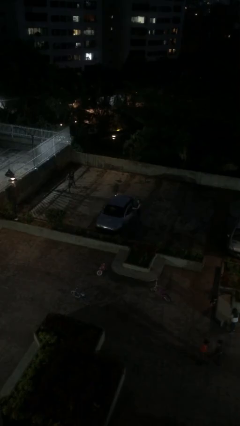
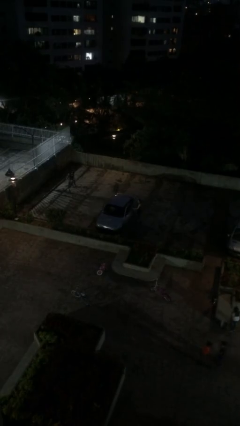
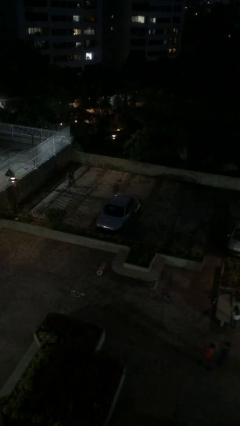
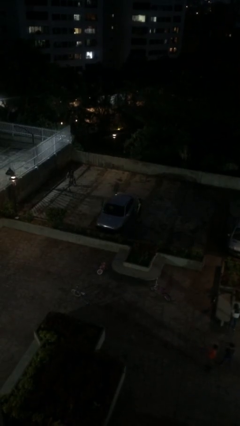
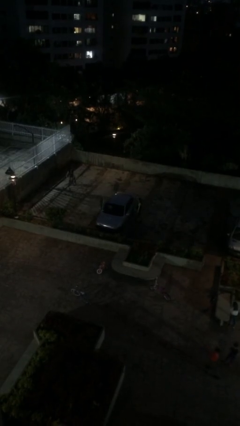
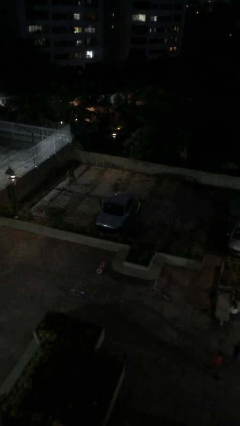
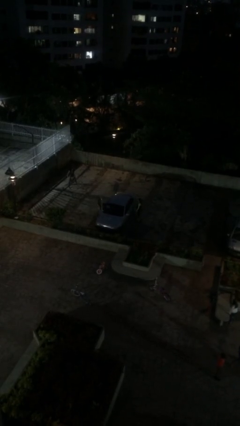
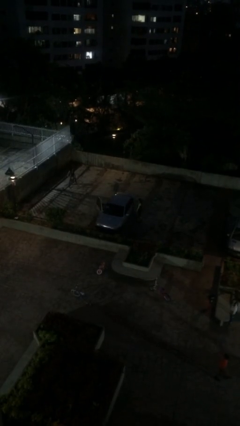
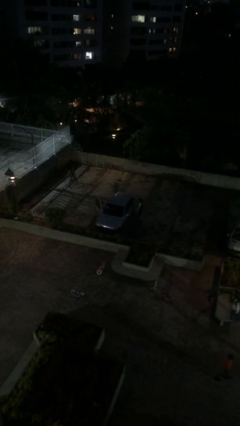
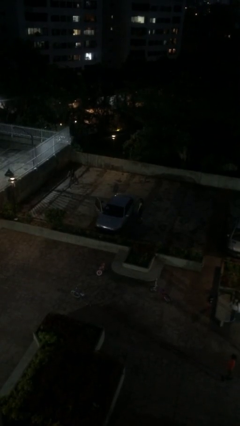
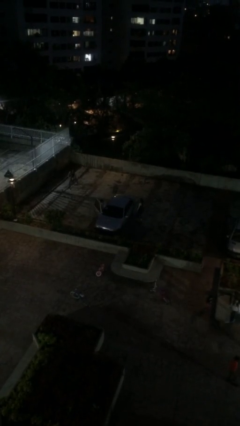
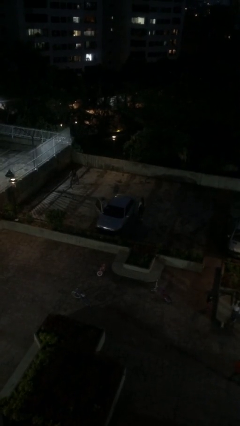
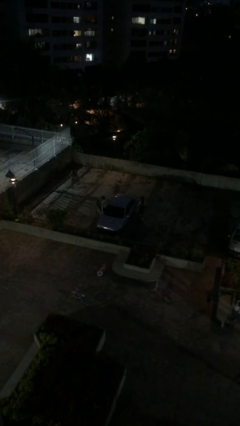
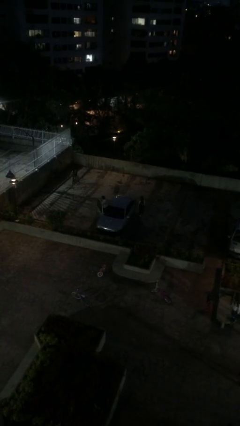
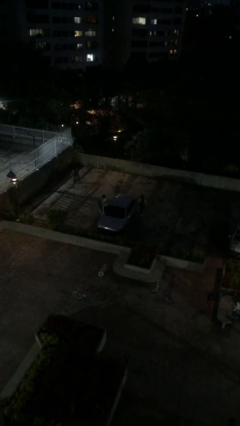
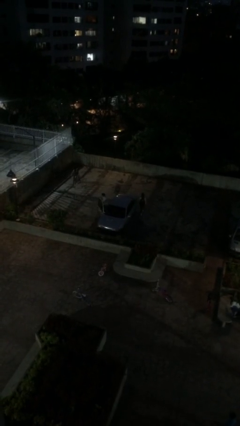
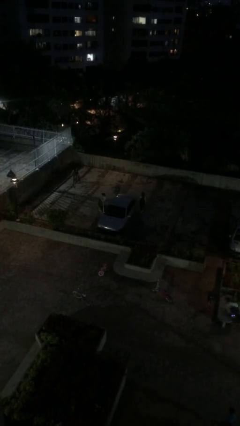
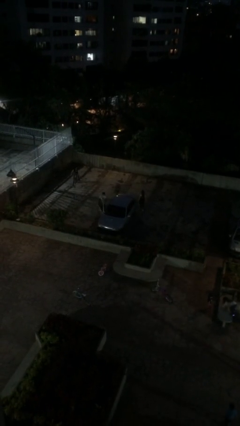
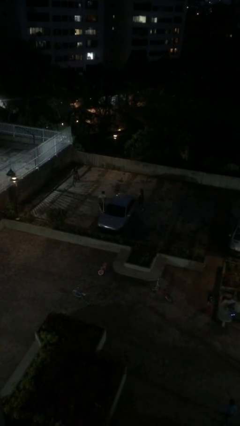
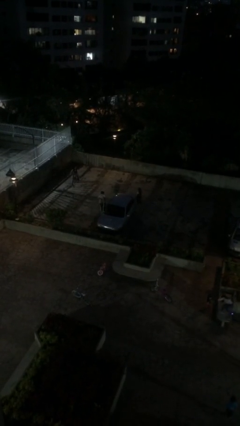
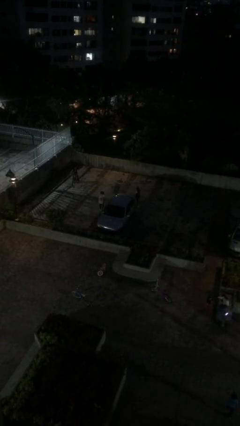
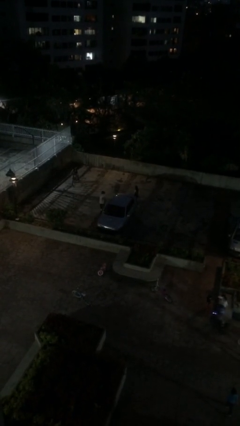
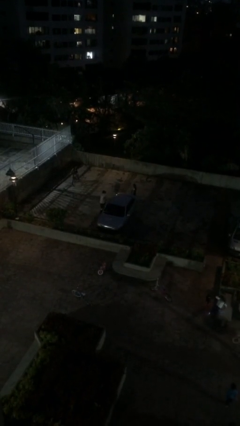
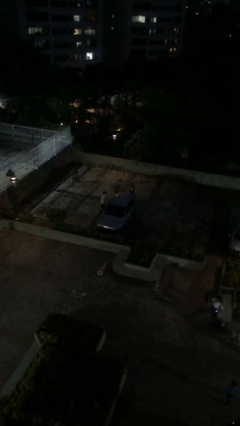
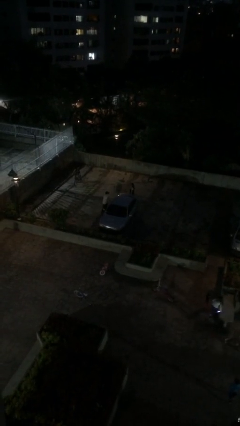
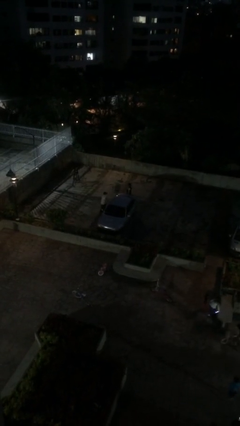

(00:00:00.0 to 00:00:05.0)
car drops off person

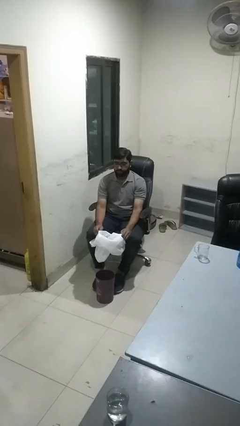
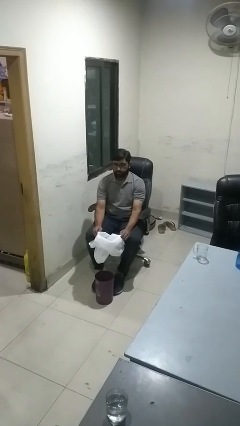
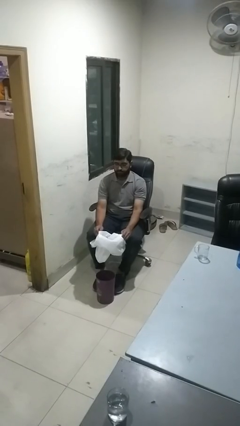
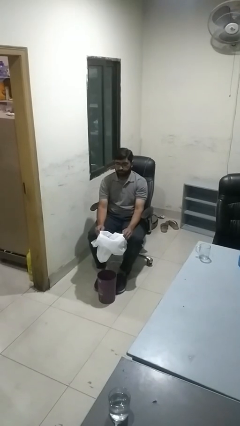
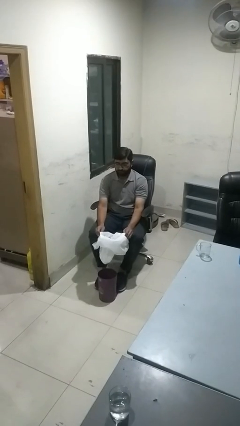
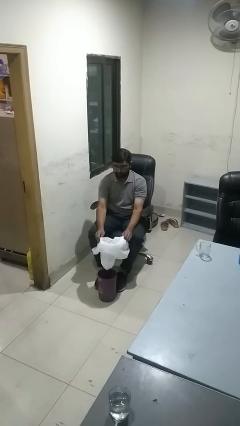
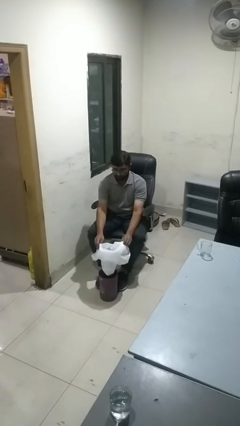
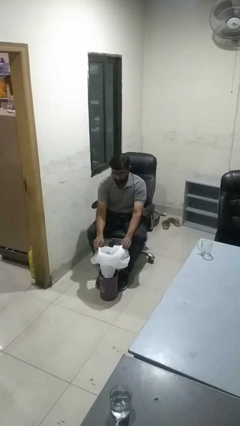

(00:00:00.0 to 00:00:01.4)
person inserts trashbag into trashcan

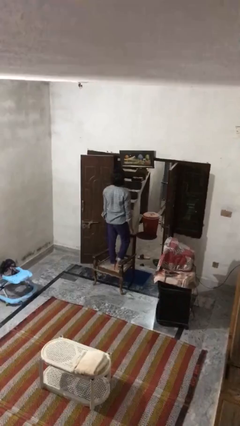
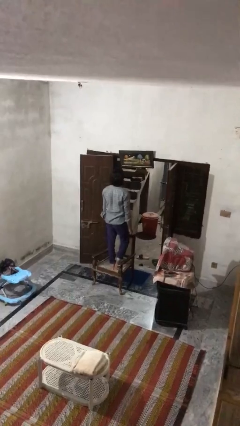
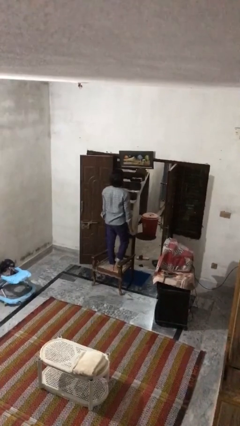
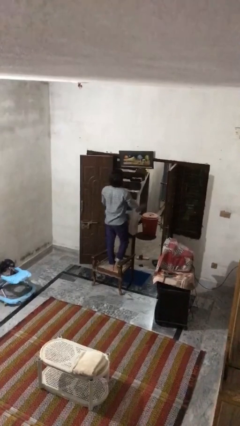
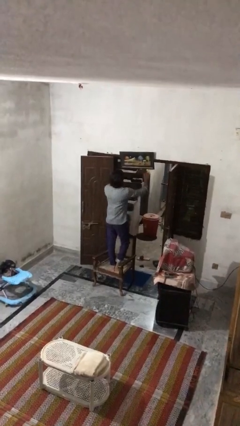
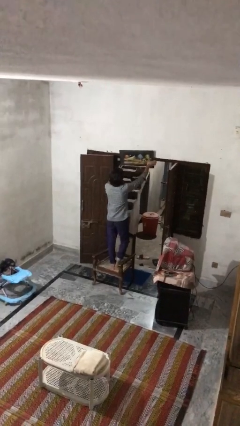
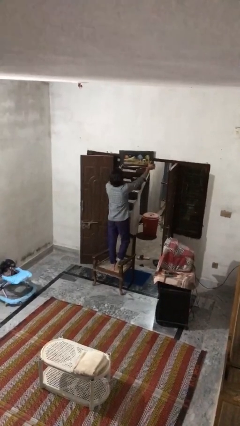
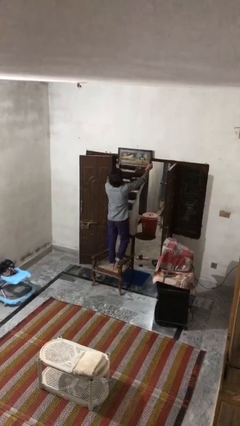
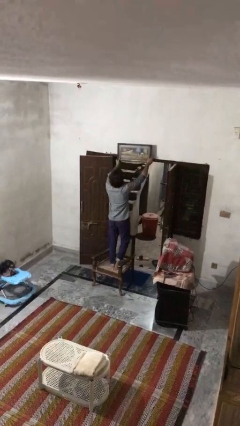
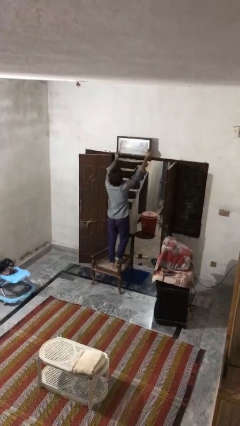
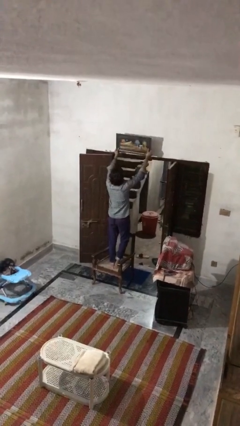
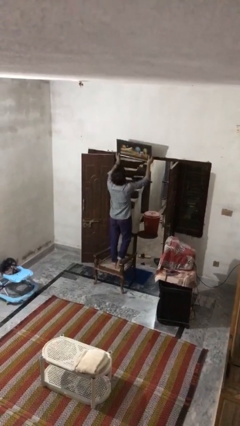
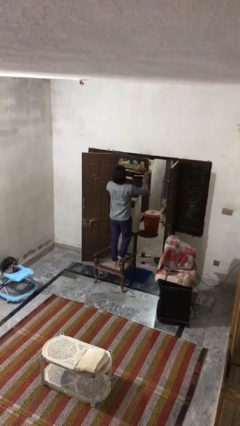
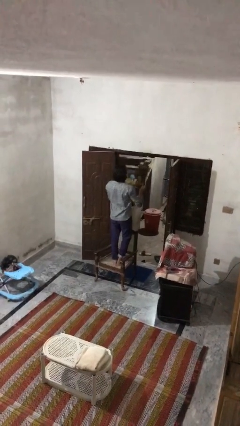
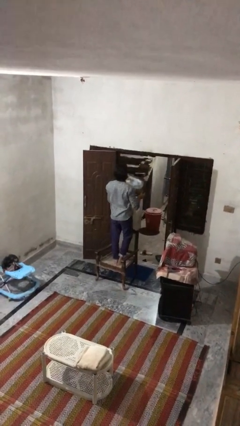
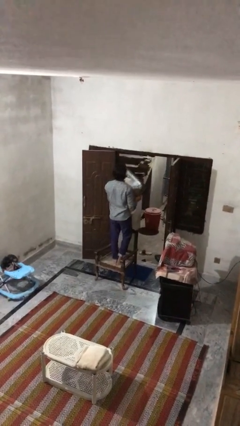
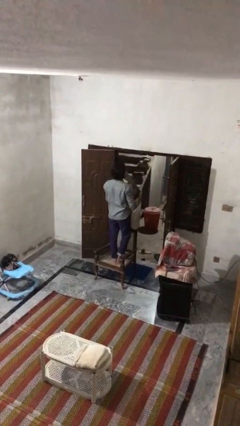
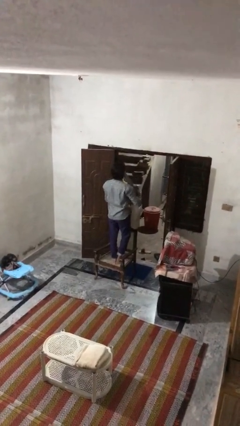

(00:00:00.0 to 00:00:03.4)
person takes down picture frame

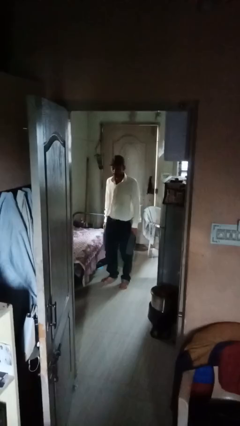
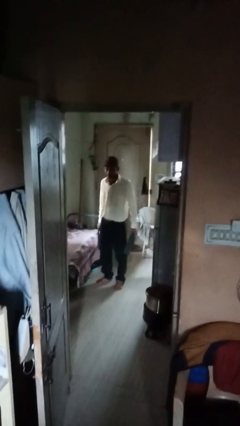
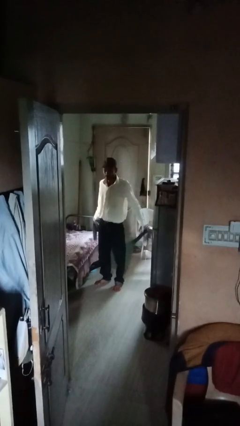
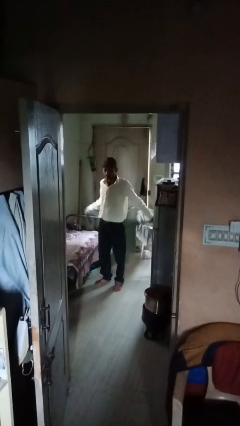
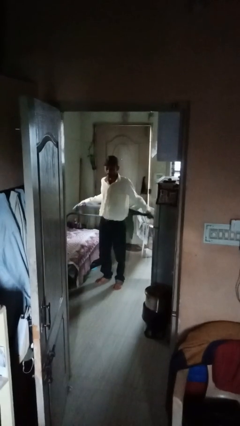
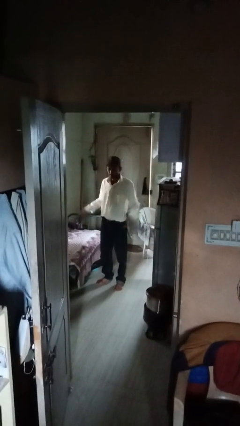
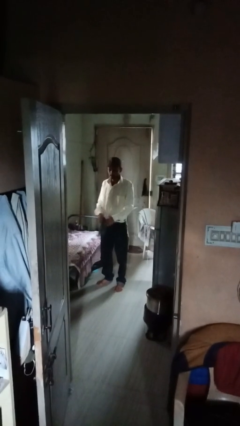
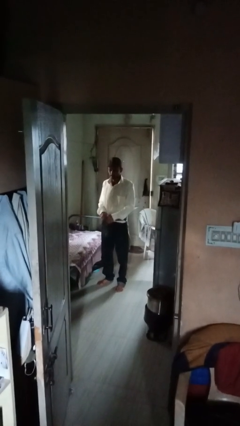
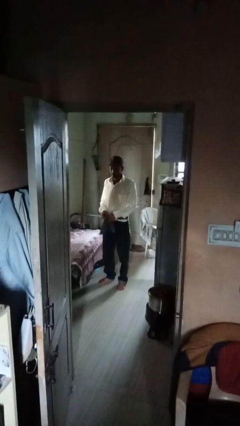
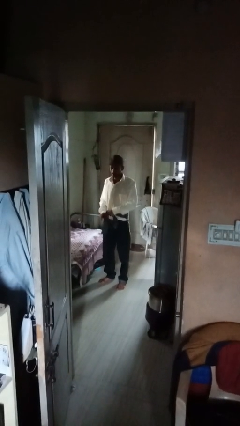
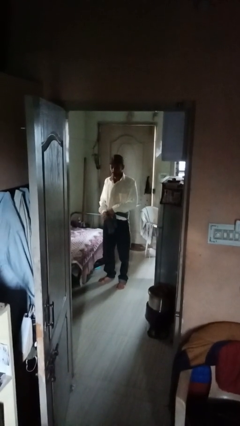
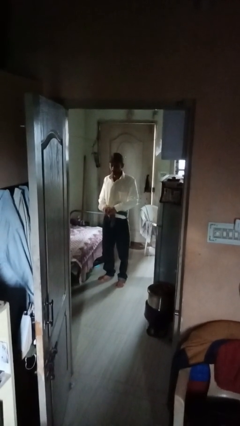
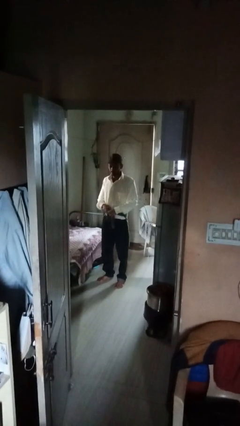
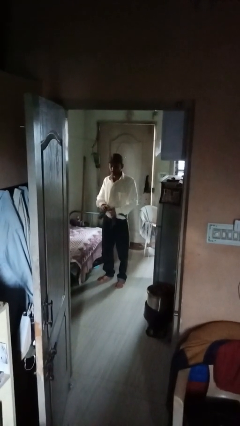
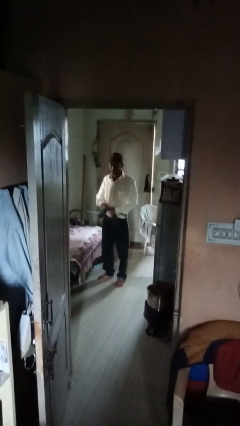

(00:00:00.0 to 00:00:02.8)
person ties jacket around waist

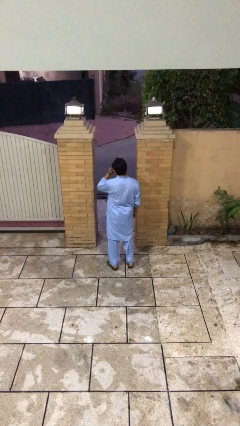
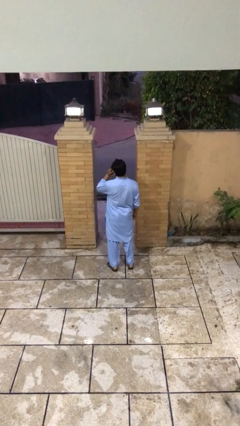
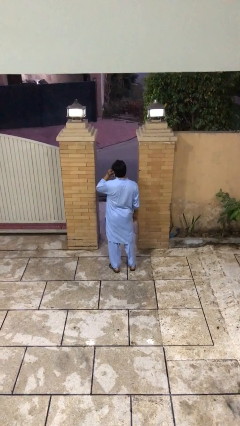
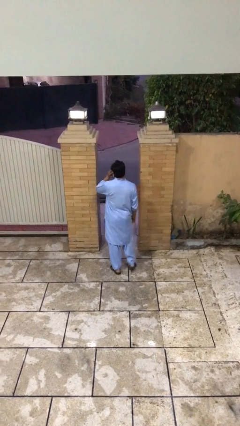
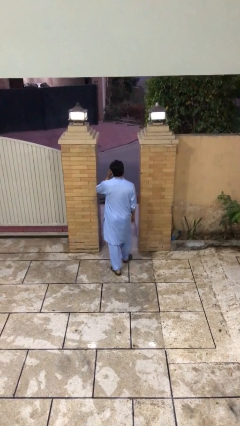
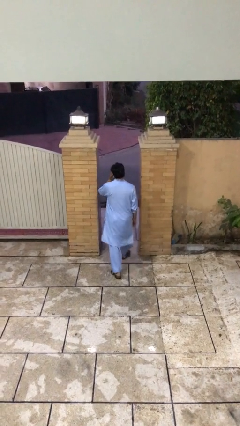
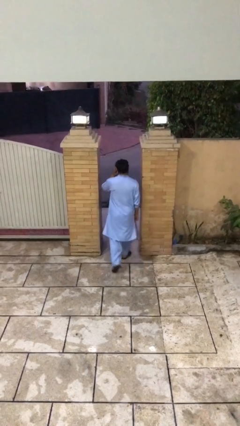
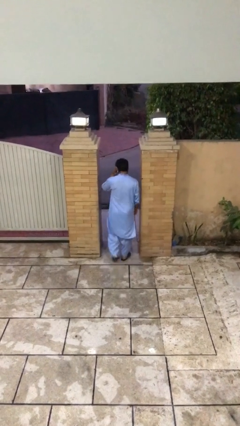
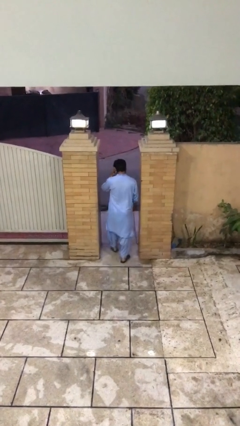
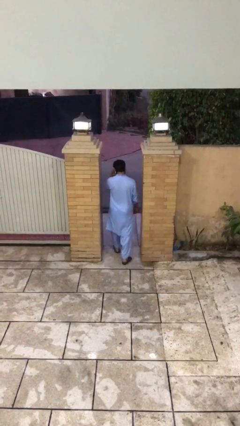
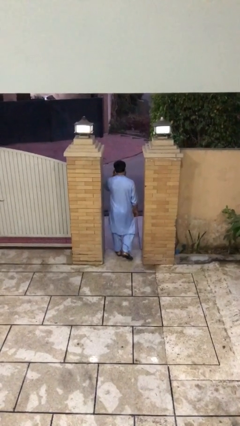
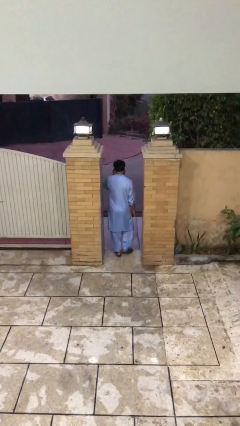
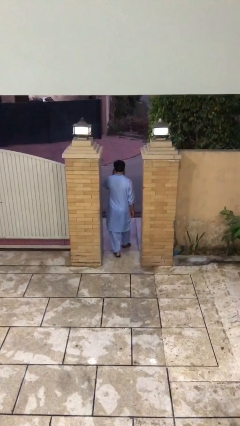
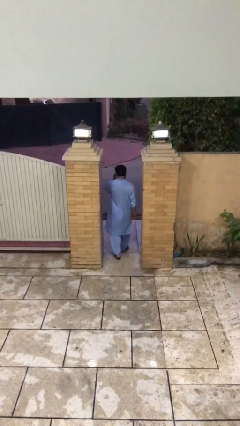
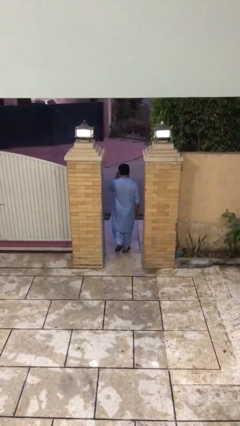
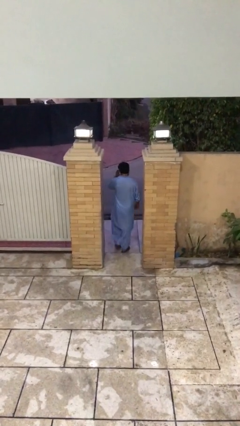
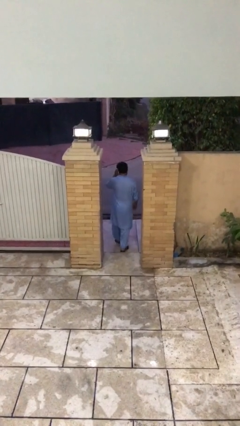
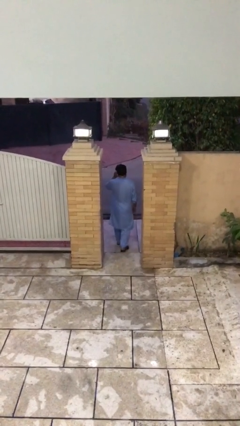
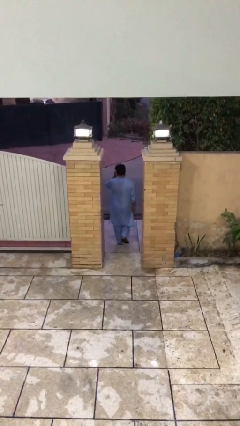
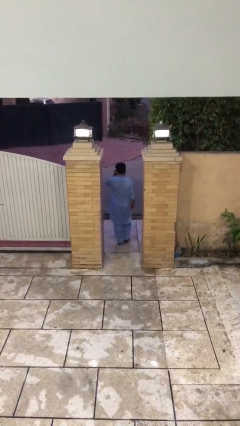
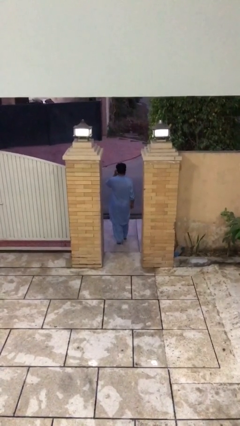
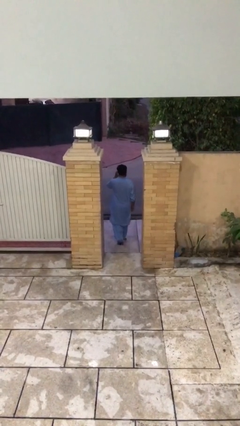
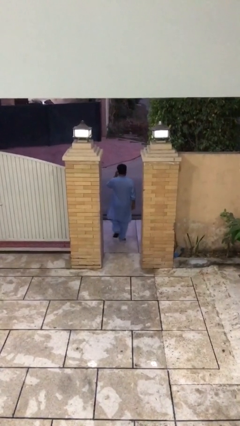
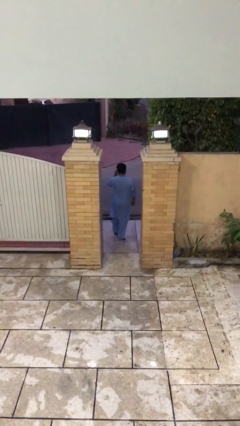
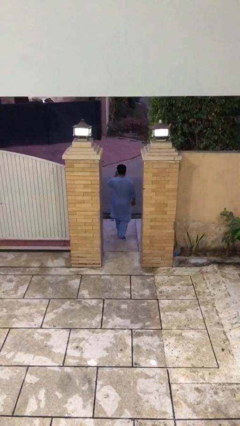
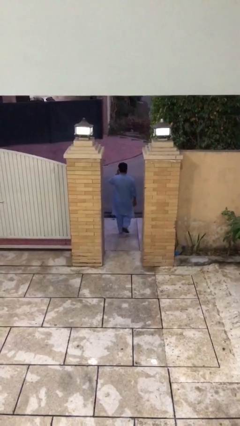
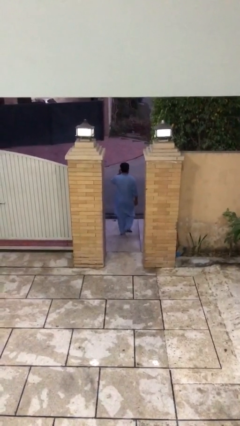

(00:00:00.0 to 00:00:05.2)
person exits scene through structure
